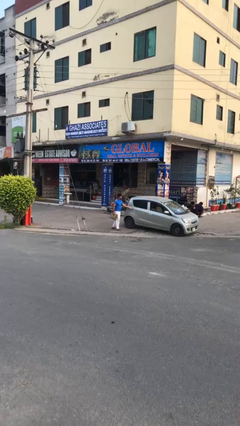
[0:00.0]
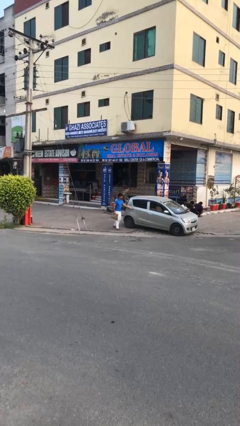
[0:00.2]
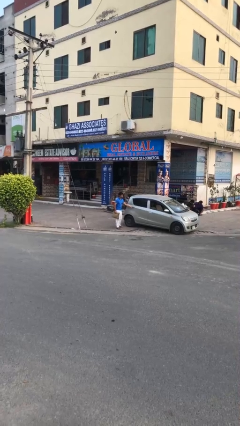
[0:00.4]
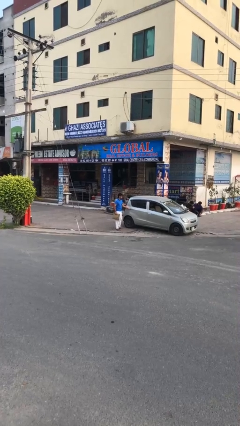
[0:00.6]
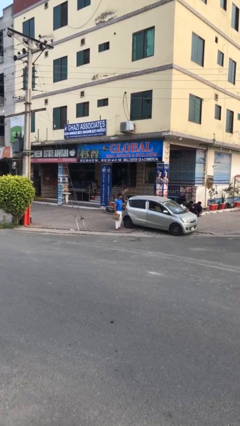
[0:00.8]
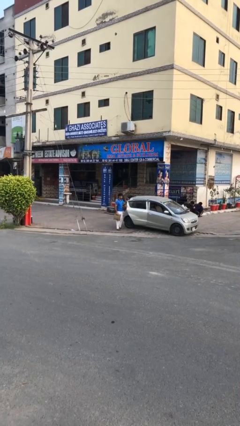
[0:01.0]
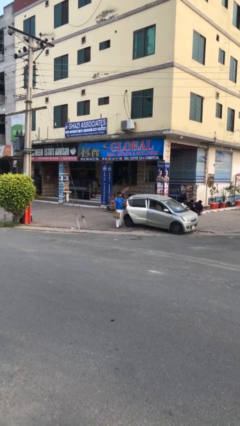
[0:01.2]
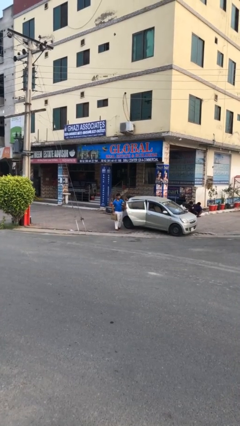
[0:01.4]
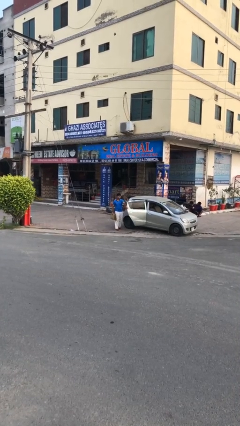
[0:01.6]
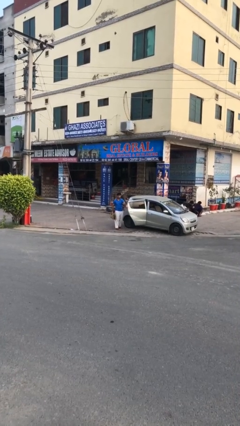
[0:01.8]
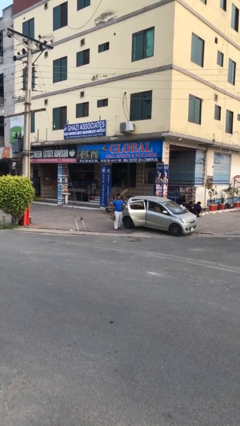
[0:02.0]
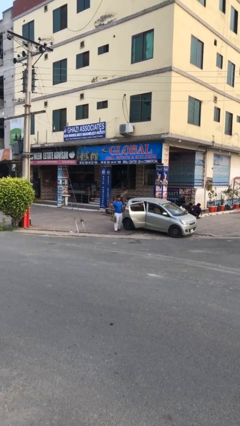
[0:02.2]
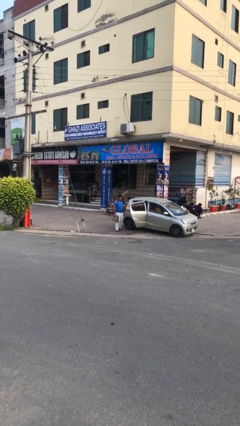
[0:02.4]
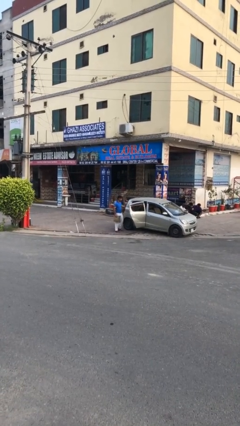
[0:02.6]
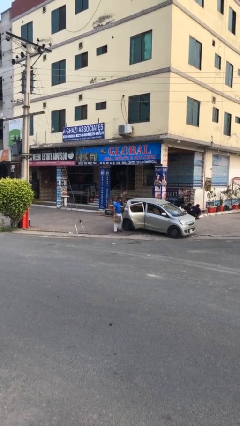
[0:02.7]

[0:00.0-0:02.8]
person opens car door

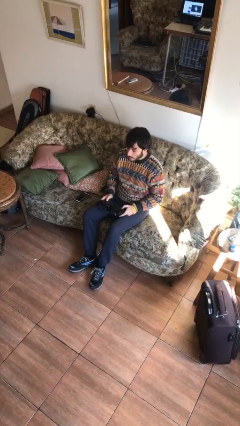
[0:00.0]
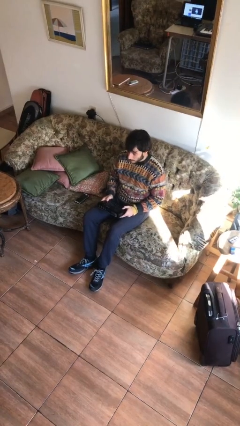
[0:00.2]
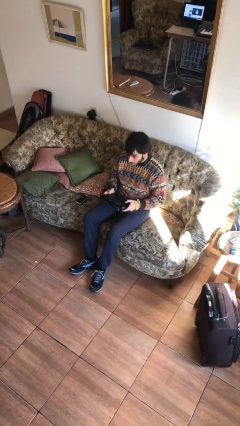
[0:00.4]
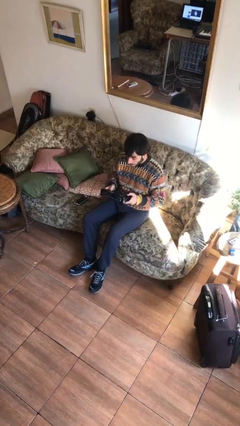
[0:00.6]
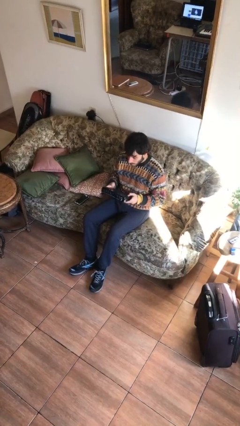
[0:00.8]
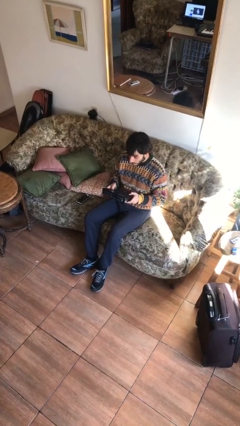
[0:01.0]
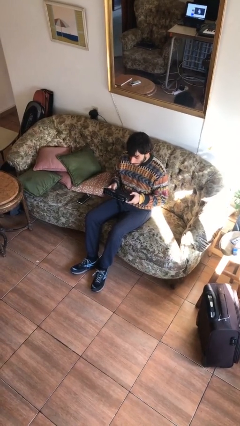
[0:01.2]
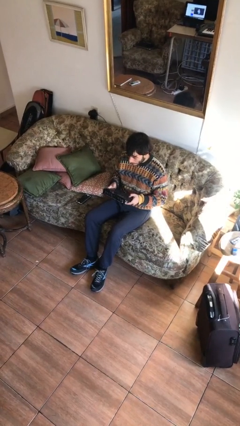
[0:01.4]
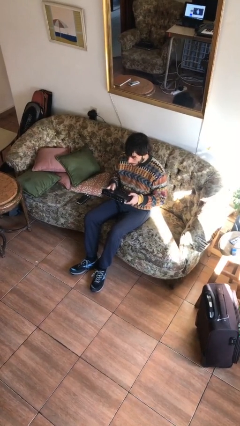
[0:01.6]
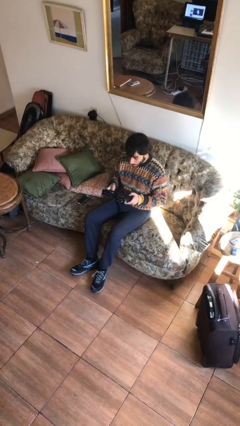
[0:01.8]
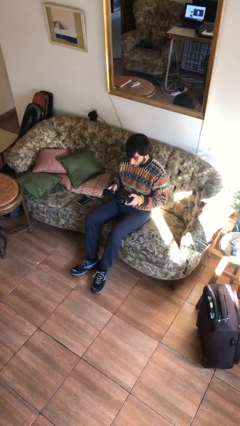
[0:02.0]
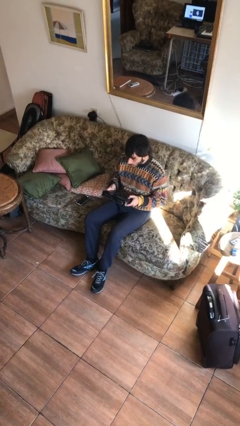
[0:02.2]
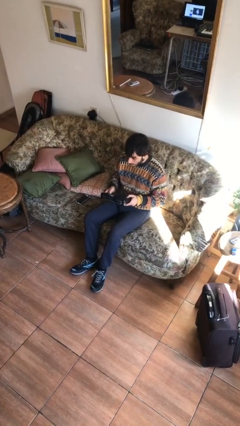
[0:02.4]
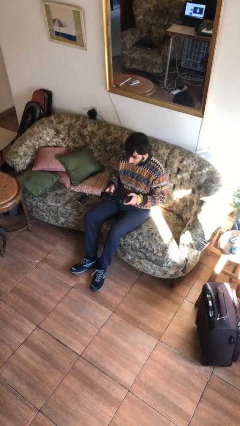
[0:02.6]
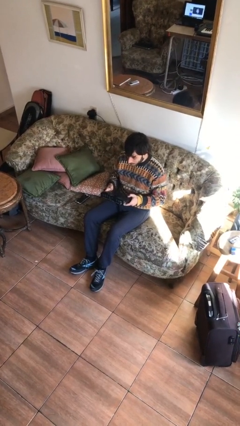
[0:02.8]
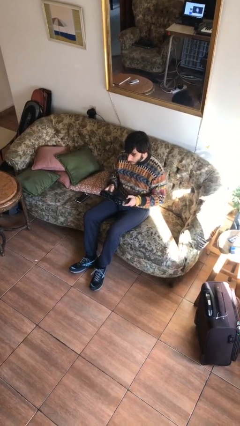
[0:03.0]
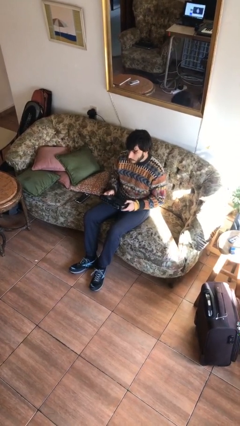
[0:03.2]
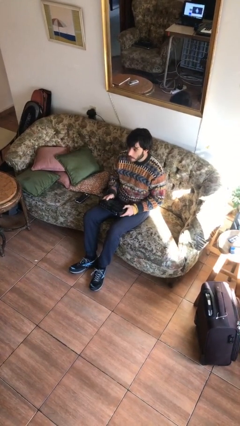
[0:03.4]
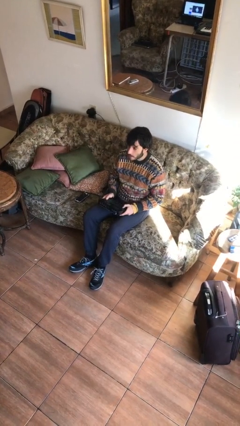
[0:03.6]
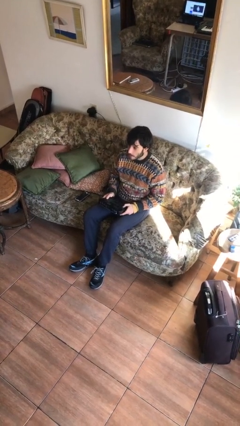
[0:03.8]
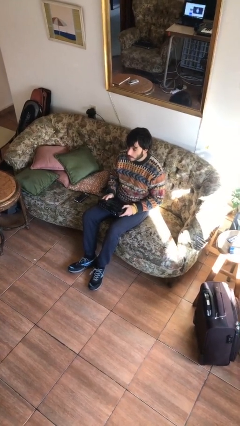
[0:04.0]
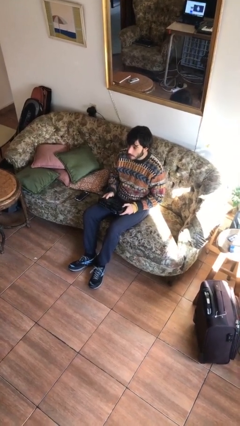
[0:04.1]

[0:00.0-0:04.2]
person interacts with handheld game

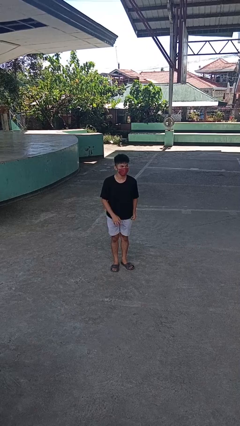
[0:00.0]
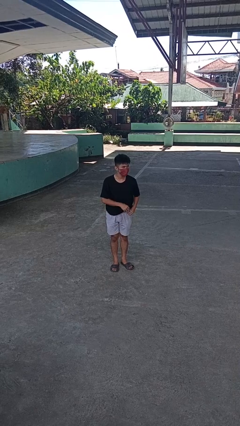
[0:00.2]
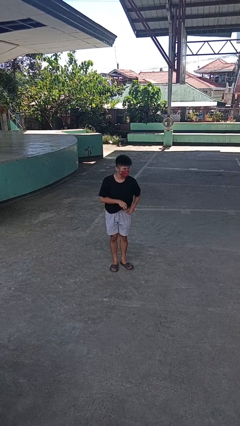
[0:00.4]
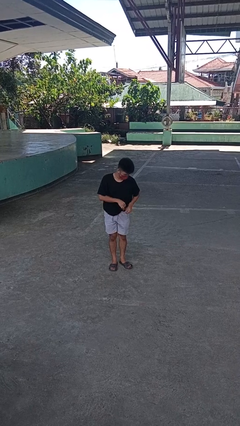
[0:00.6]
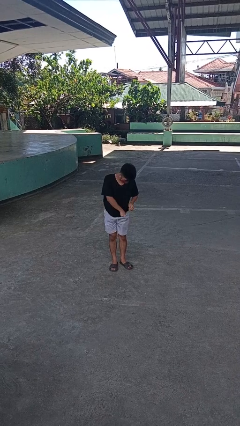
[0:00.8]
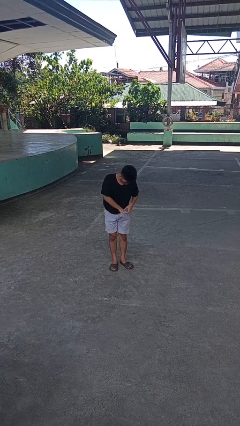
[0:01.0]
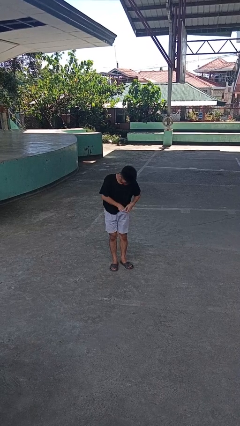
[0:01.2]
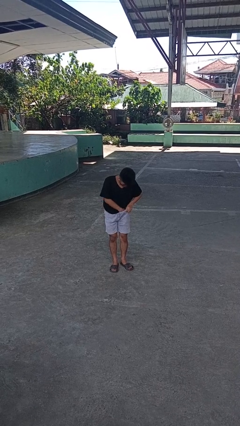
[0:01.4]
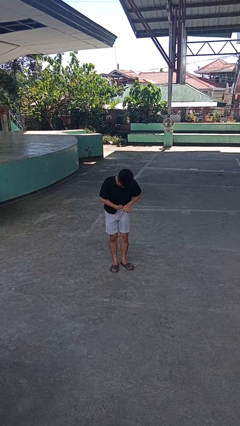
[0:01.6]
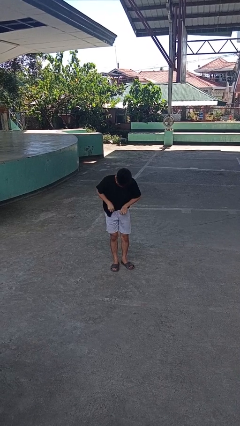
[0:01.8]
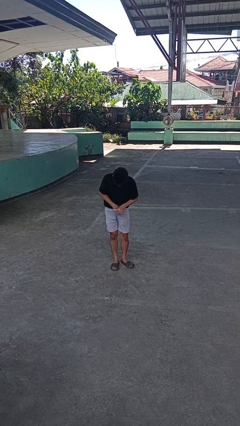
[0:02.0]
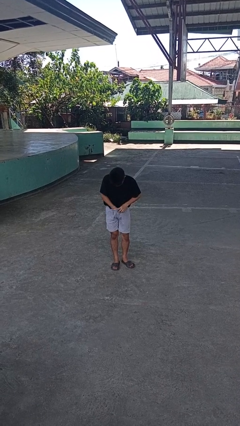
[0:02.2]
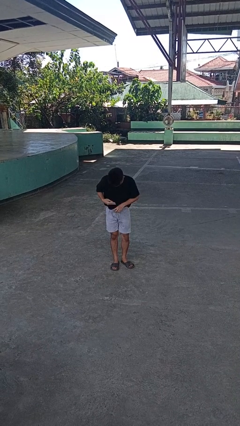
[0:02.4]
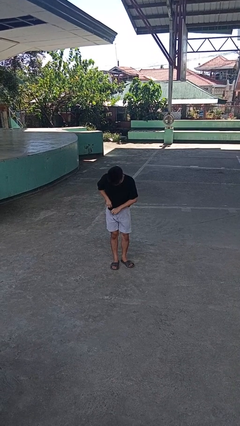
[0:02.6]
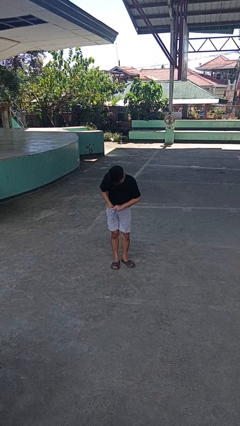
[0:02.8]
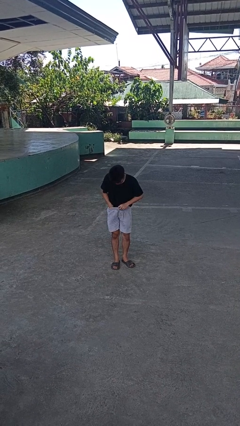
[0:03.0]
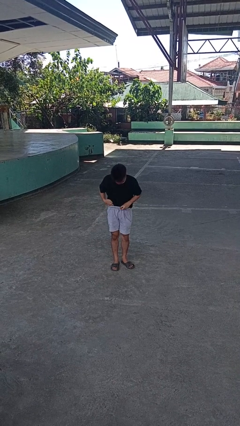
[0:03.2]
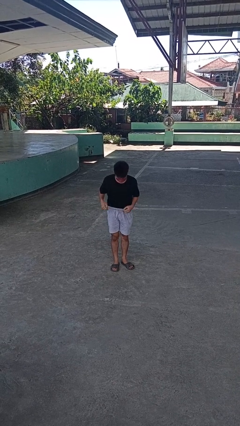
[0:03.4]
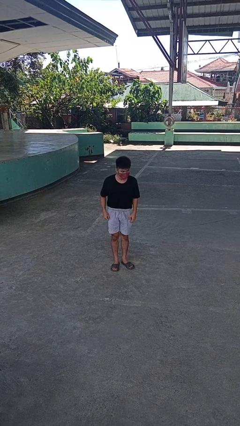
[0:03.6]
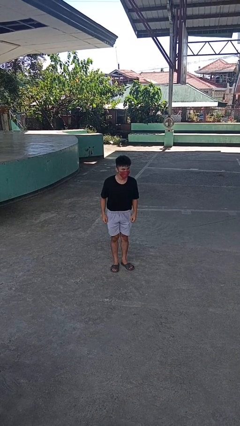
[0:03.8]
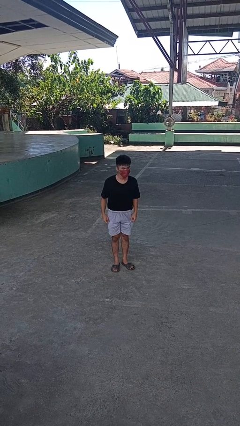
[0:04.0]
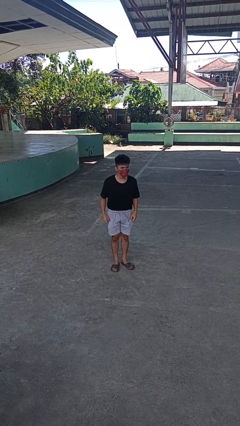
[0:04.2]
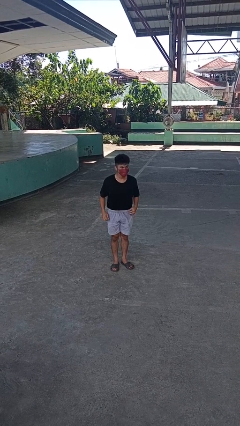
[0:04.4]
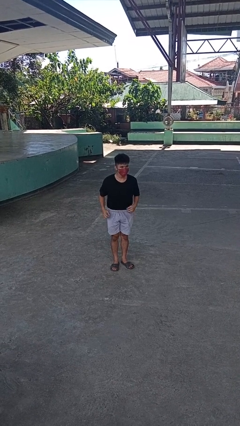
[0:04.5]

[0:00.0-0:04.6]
person tucks in shirt

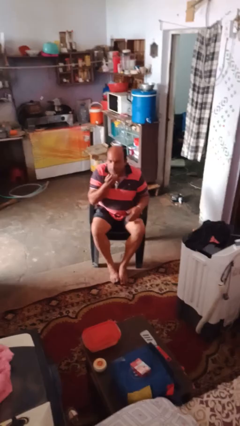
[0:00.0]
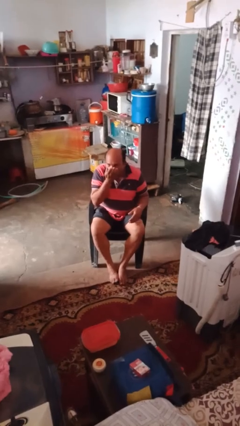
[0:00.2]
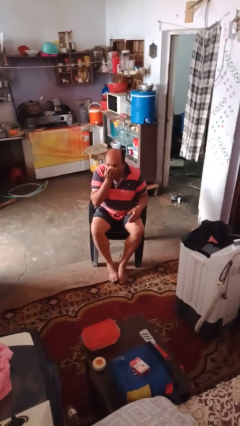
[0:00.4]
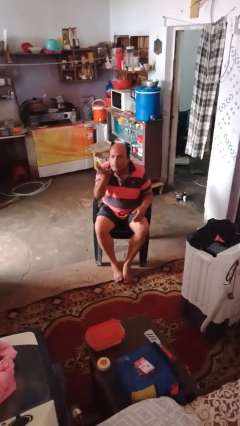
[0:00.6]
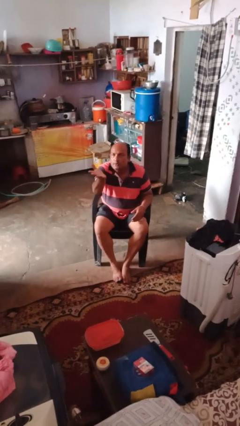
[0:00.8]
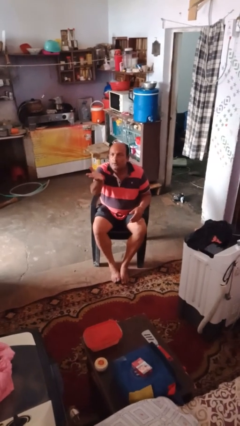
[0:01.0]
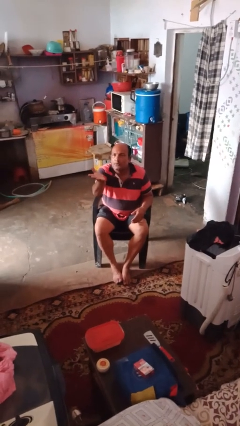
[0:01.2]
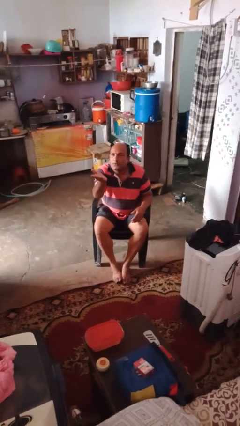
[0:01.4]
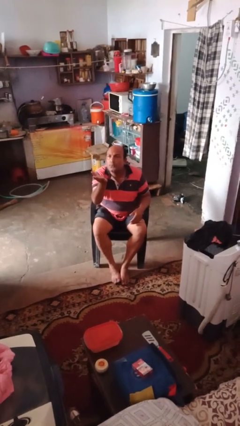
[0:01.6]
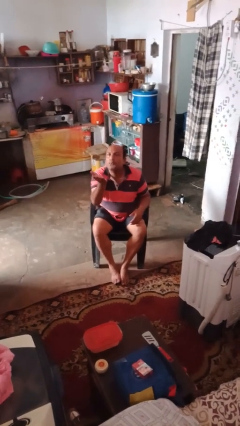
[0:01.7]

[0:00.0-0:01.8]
person gestures blow kiss

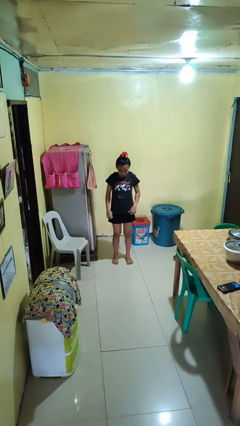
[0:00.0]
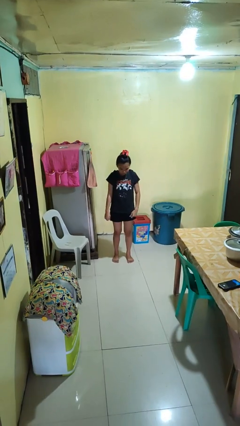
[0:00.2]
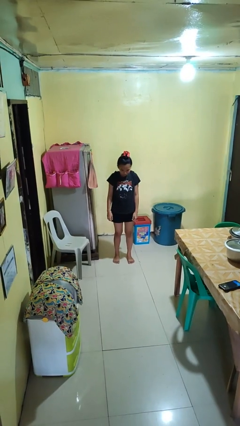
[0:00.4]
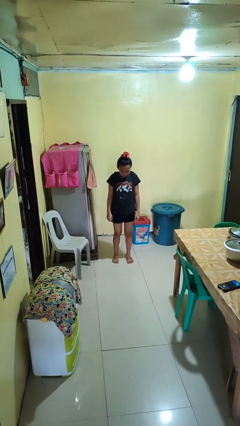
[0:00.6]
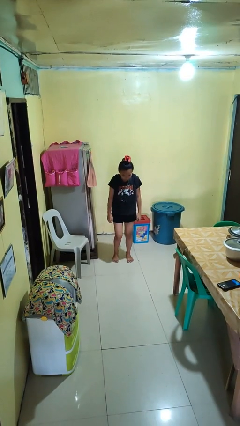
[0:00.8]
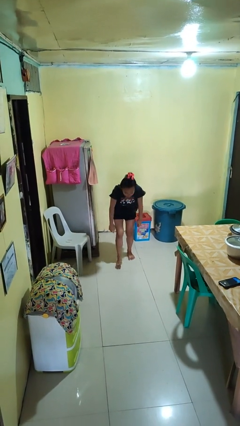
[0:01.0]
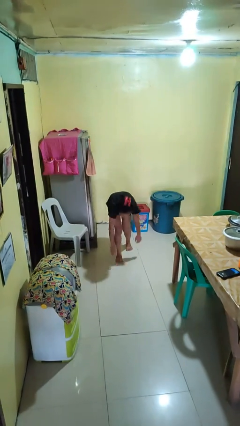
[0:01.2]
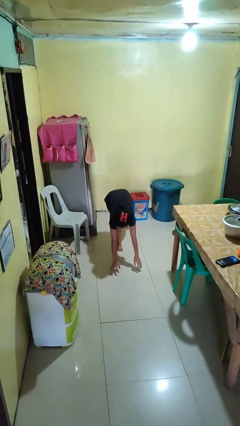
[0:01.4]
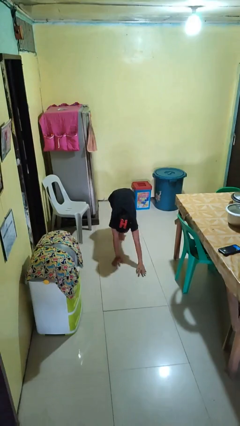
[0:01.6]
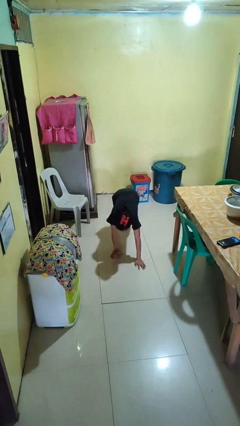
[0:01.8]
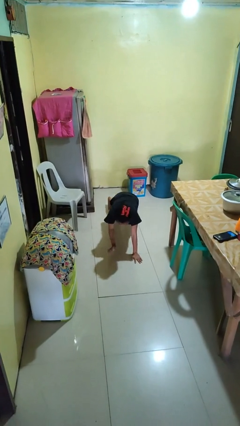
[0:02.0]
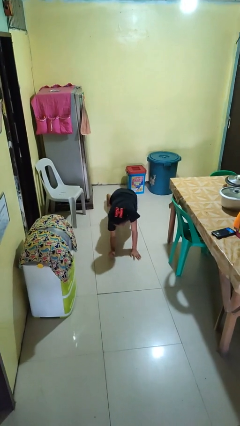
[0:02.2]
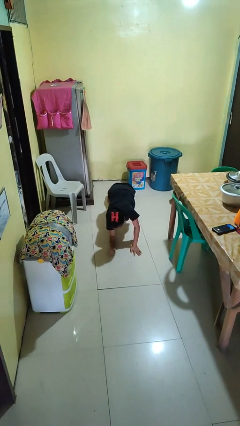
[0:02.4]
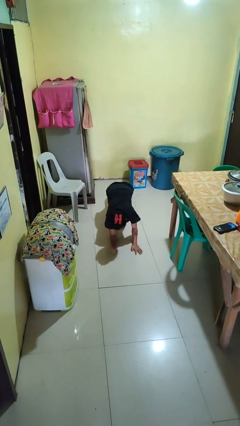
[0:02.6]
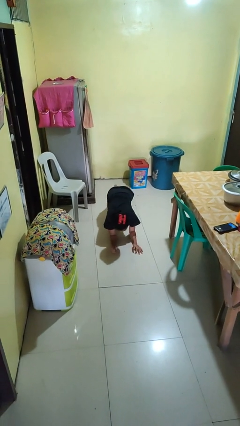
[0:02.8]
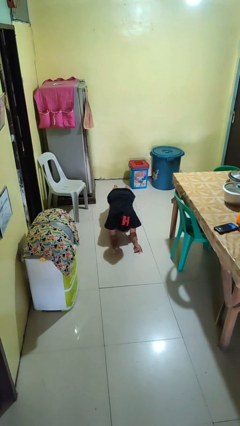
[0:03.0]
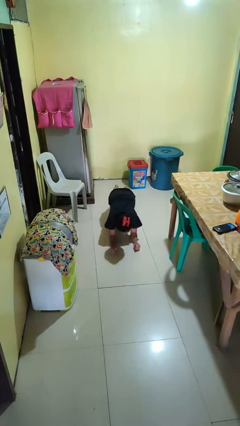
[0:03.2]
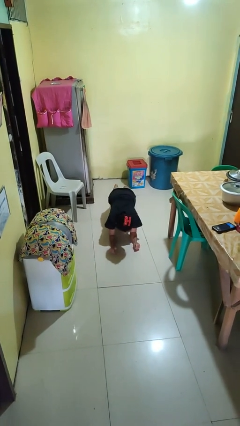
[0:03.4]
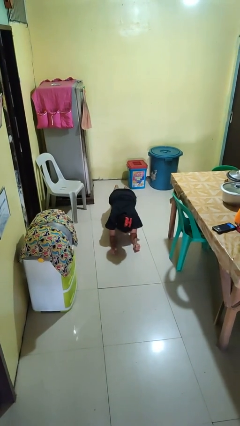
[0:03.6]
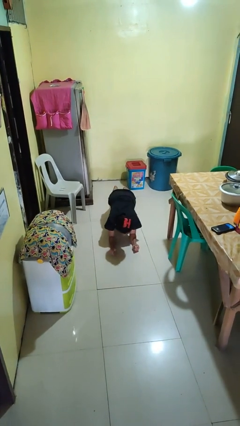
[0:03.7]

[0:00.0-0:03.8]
person exercises with plank

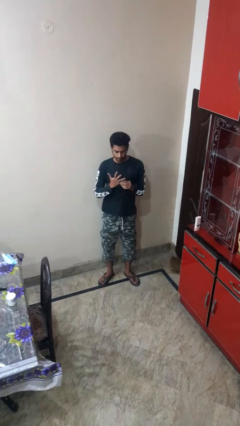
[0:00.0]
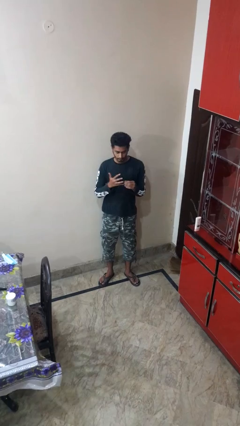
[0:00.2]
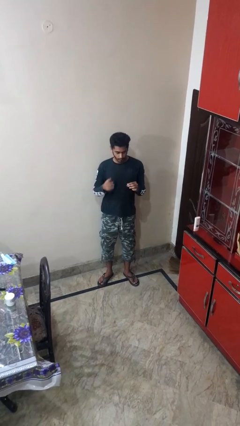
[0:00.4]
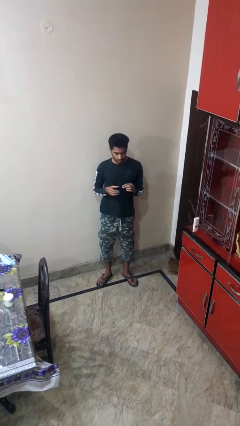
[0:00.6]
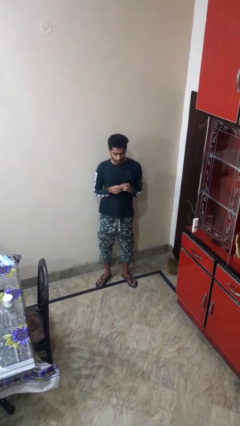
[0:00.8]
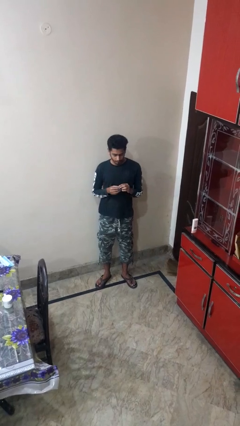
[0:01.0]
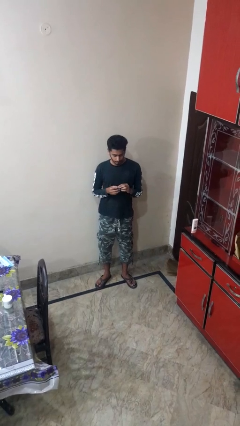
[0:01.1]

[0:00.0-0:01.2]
person takes off ring
